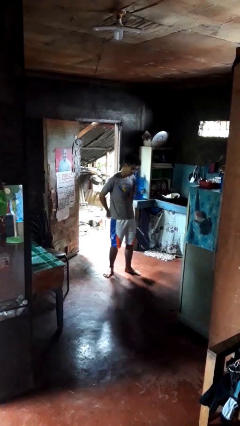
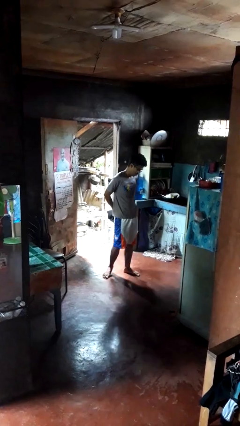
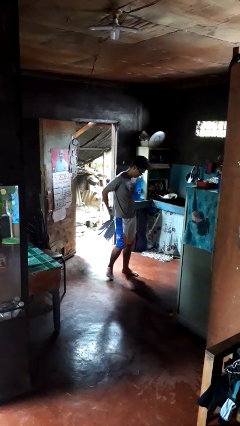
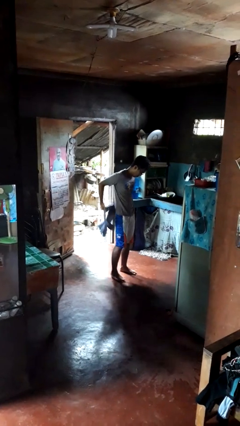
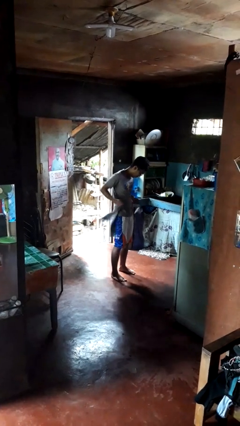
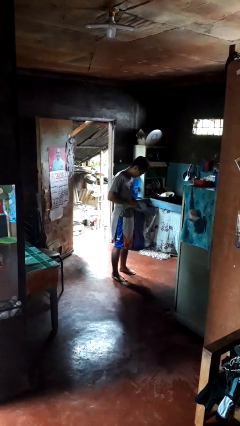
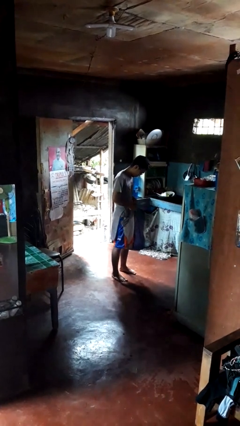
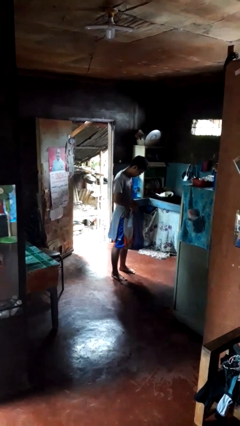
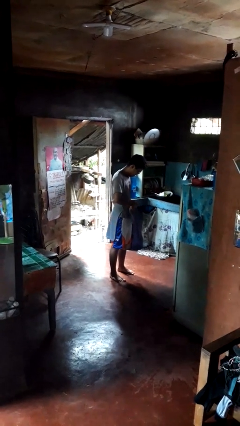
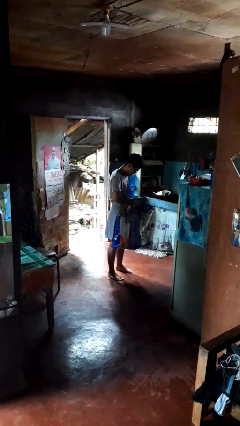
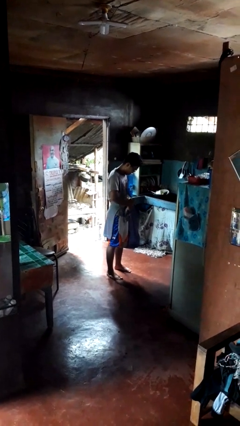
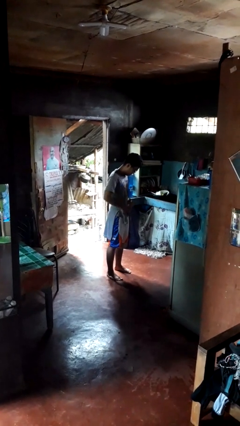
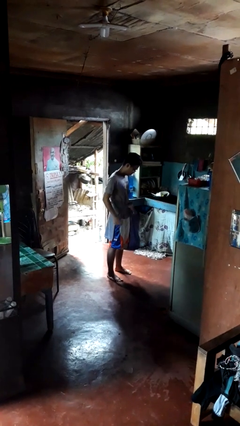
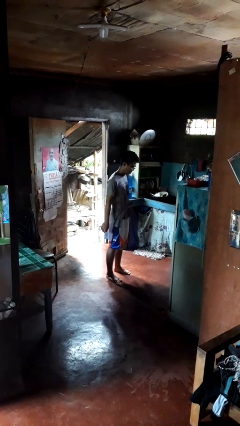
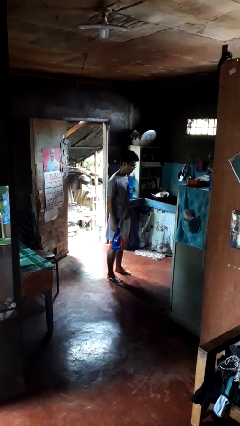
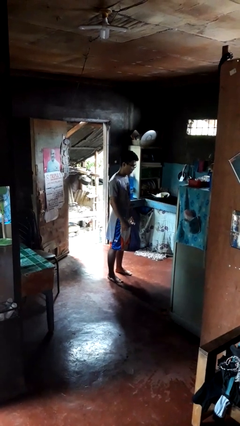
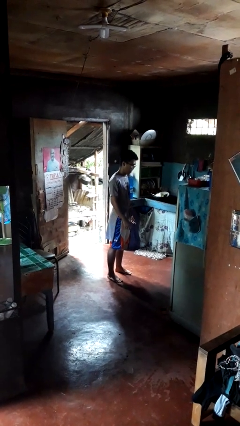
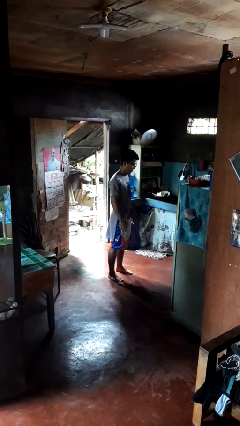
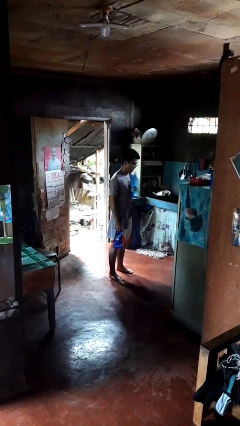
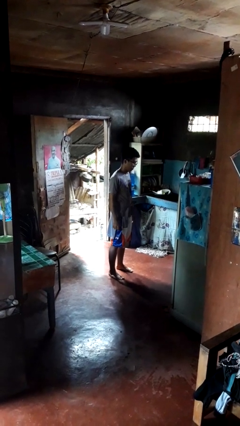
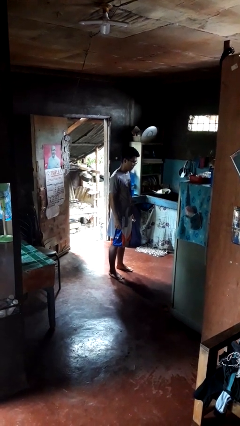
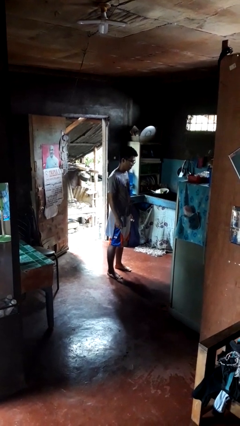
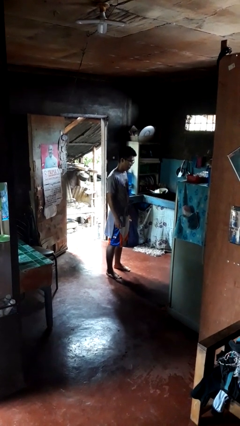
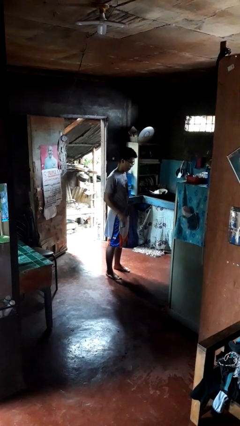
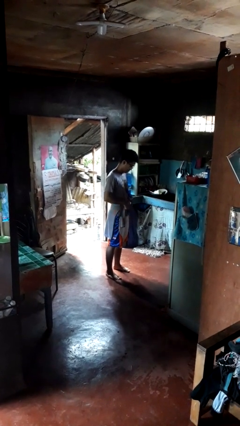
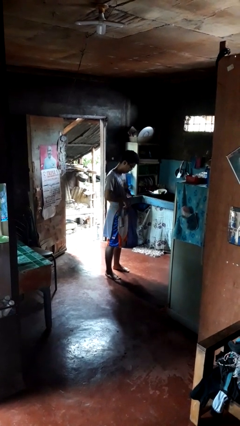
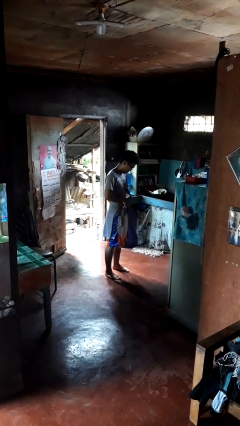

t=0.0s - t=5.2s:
person ties jacket around waist

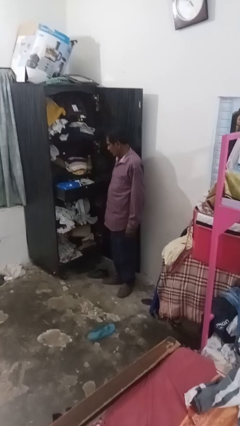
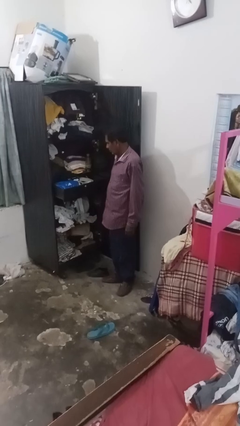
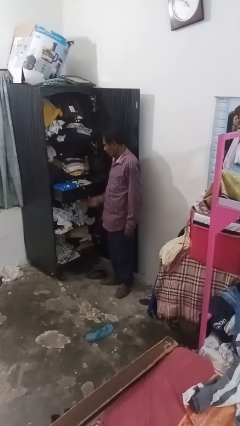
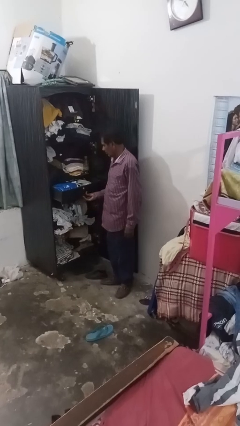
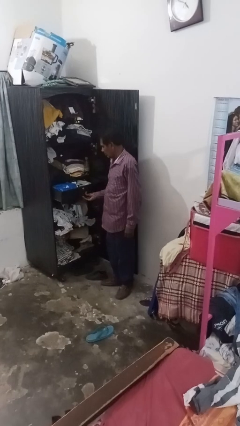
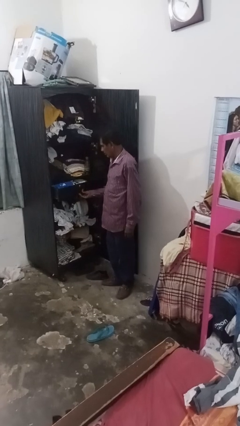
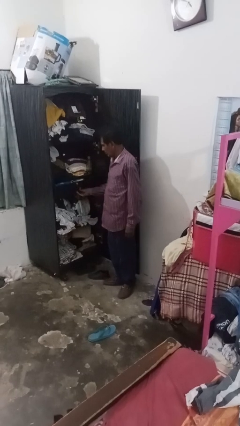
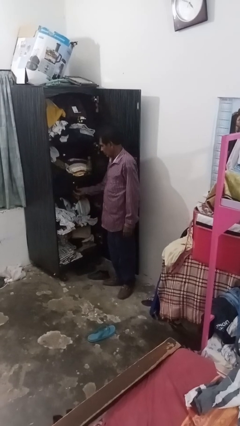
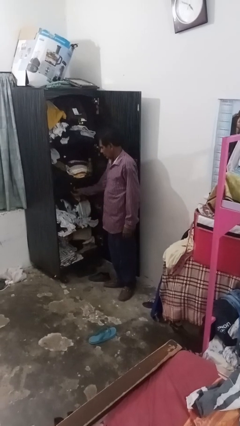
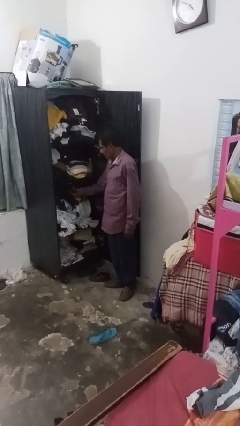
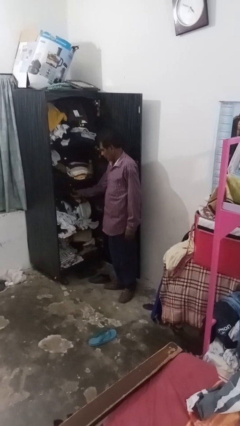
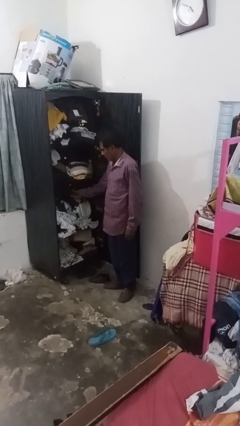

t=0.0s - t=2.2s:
person closes dresser drawer

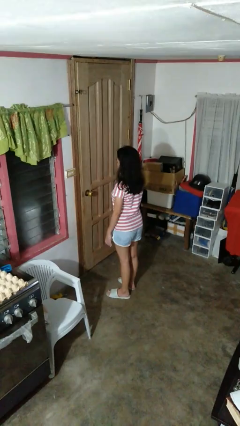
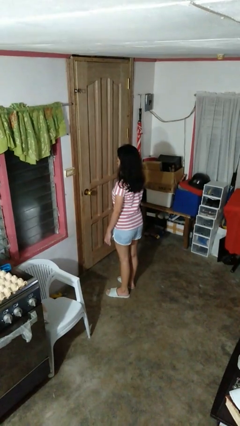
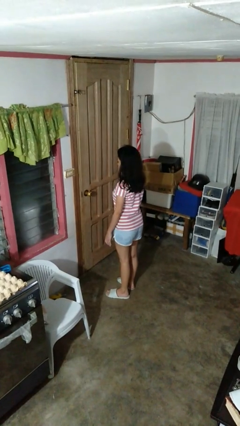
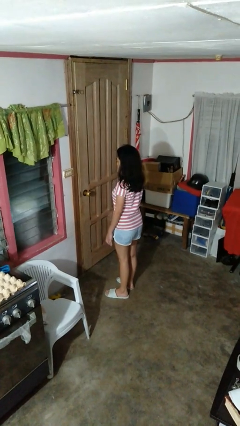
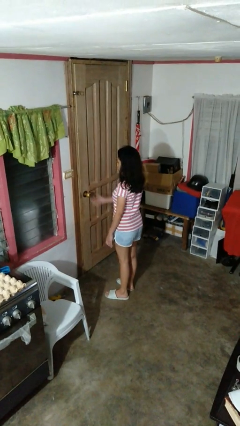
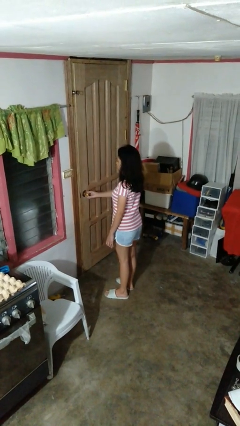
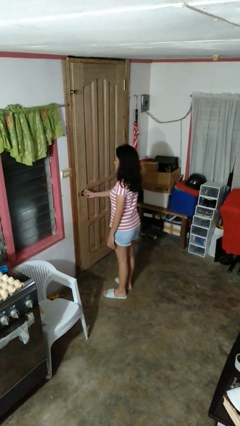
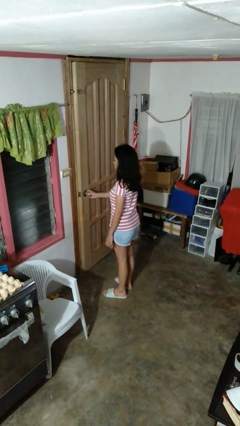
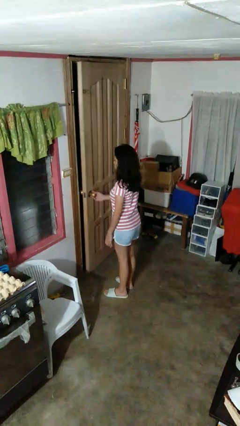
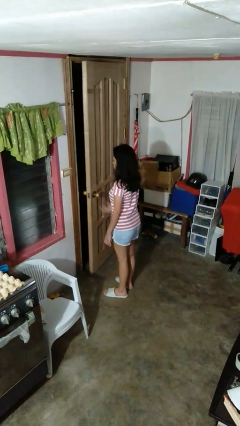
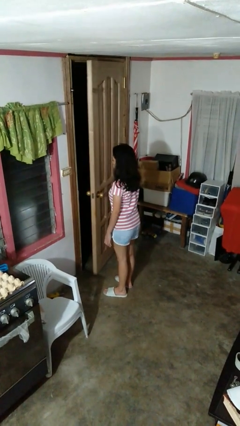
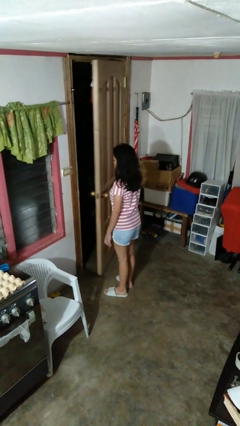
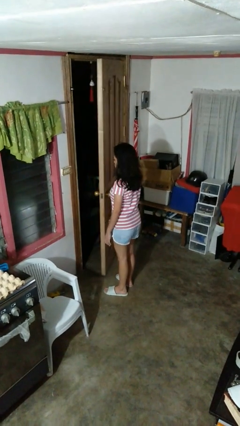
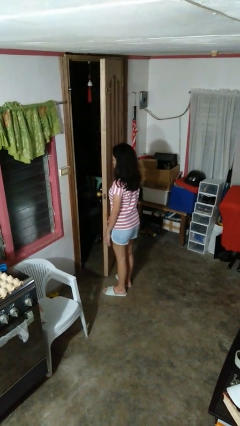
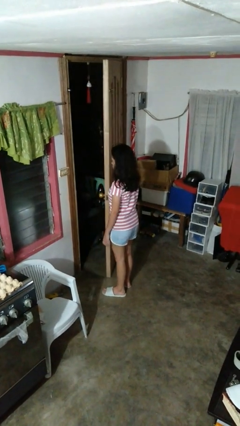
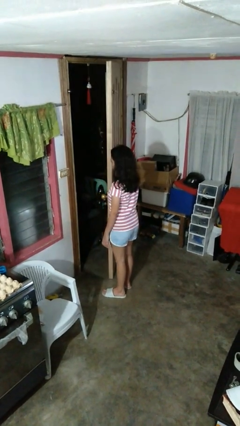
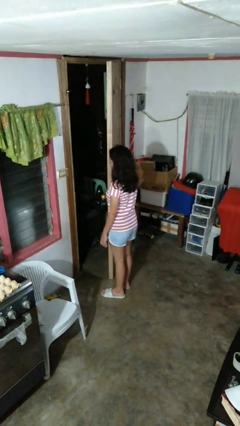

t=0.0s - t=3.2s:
person opens facility door

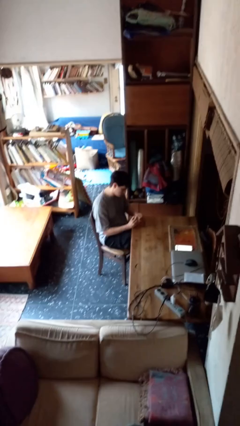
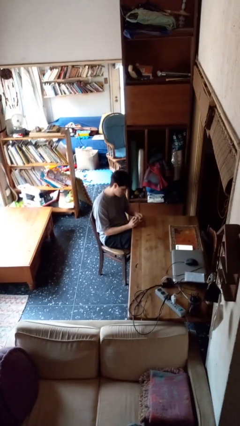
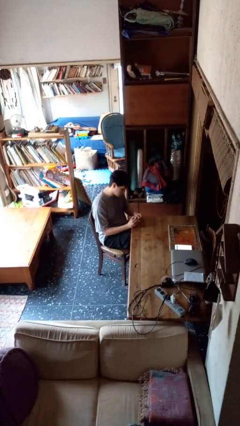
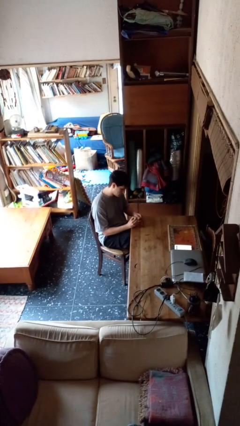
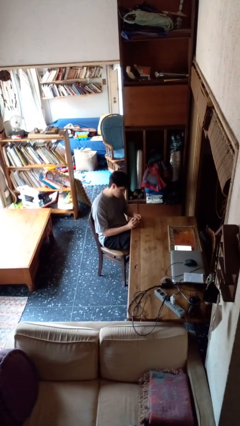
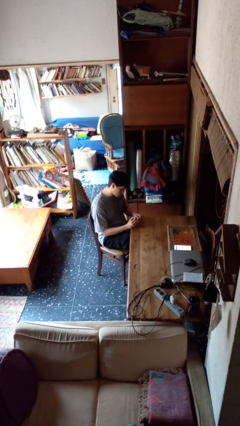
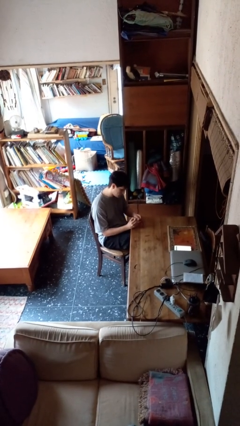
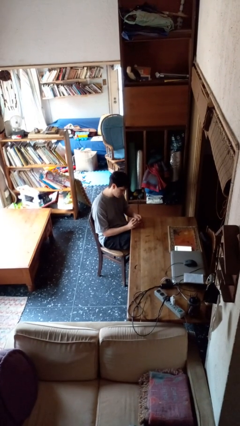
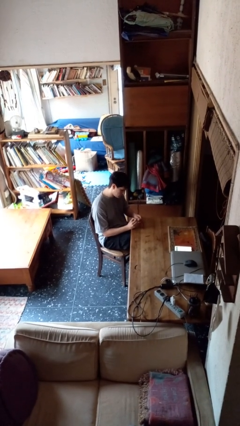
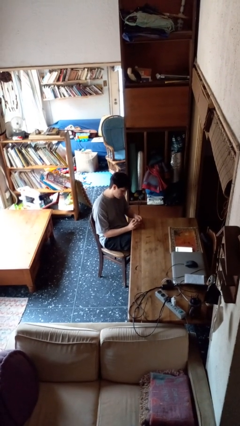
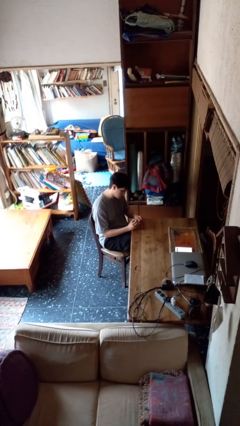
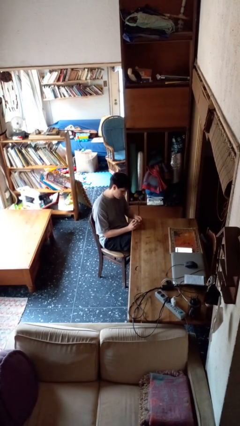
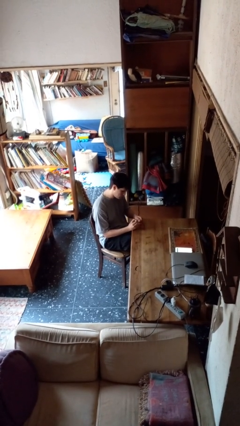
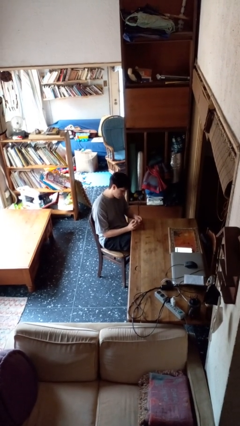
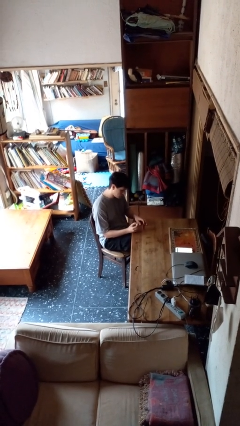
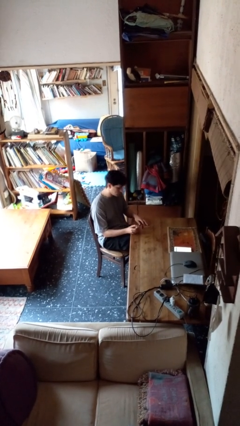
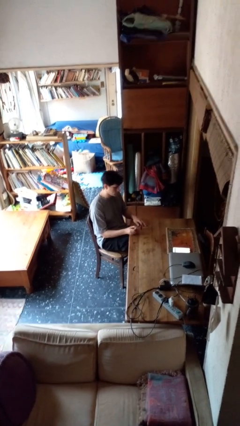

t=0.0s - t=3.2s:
person paints fingernails

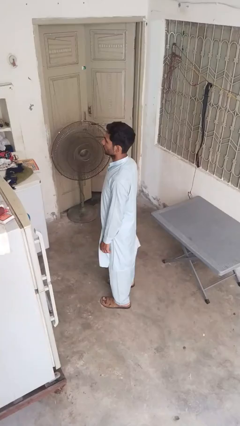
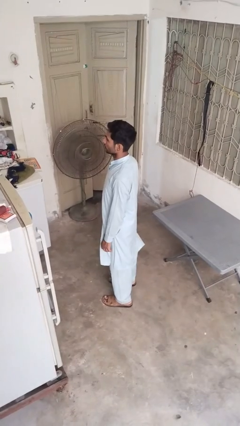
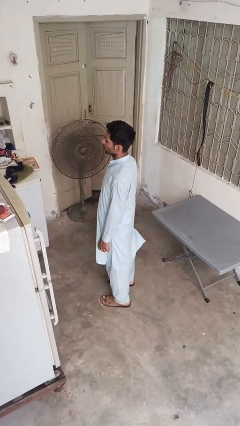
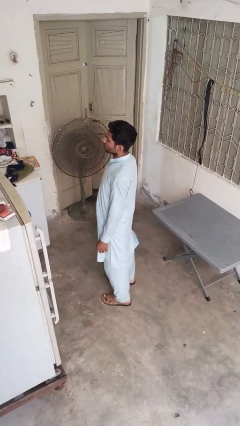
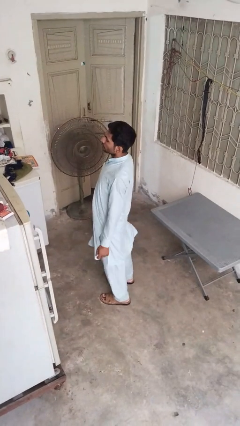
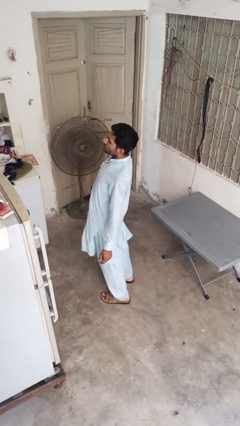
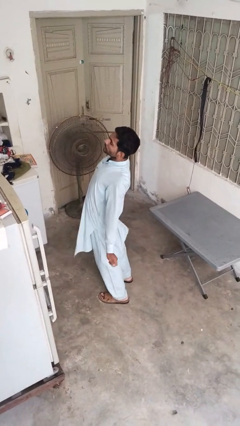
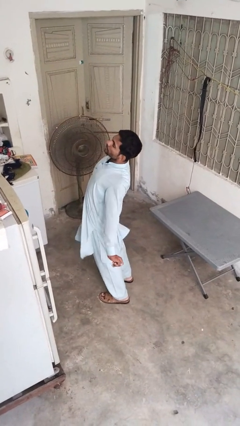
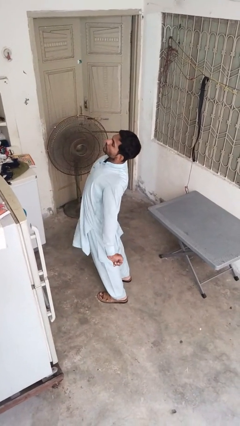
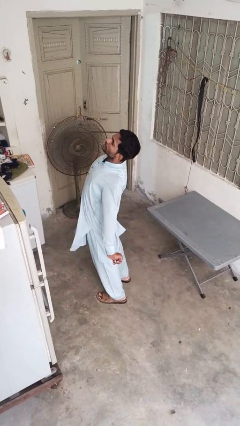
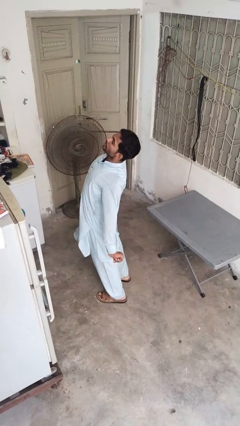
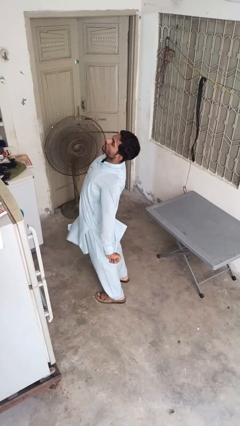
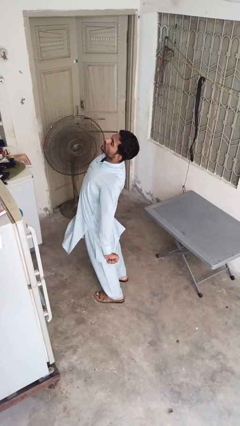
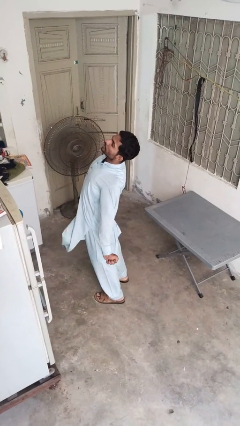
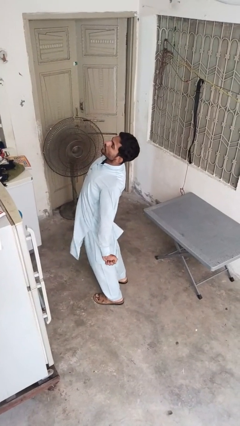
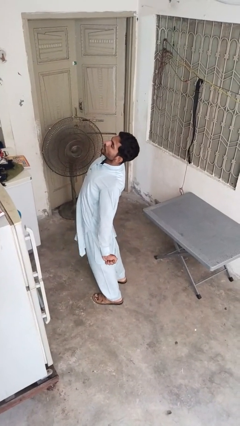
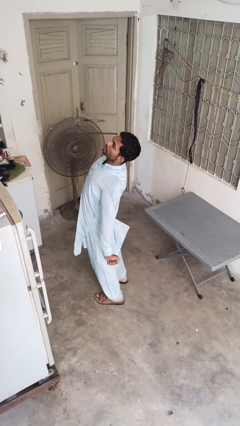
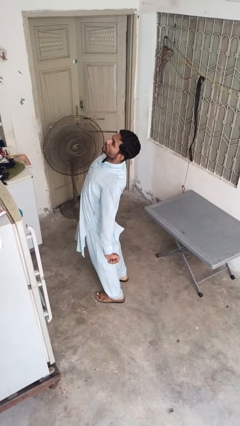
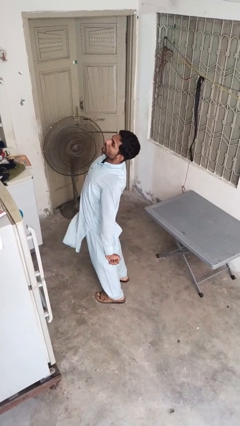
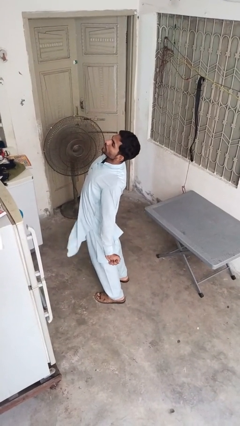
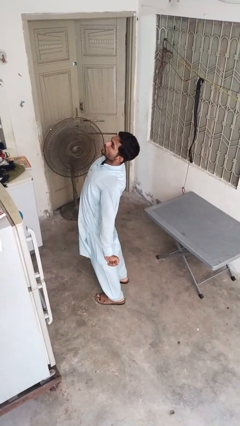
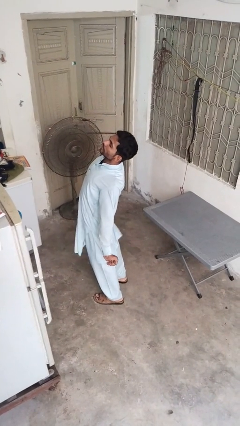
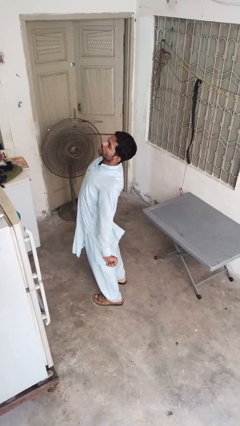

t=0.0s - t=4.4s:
person stretches back
